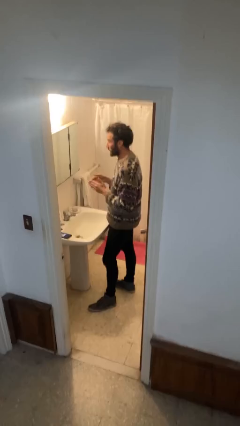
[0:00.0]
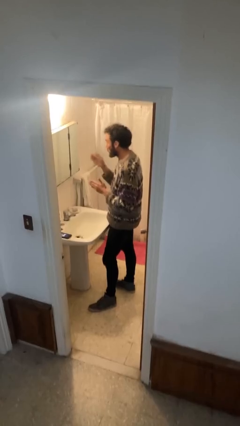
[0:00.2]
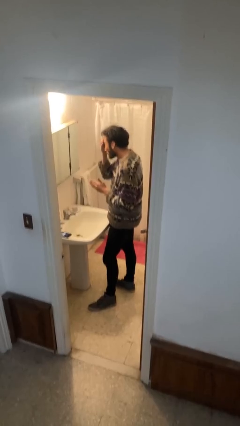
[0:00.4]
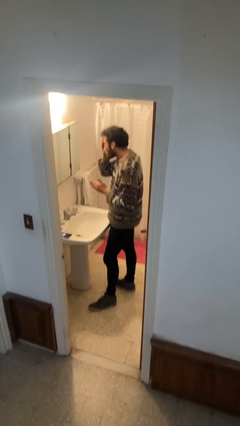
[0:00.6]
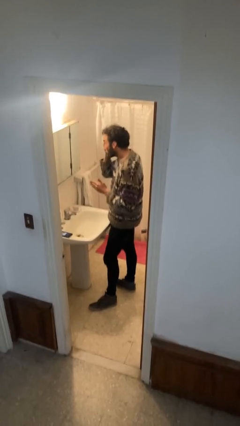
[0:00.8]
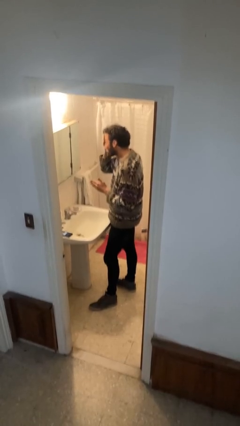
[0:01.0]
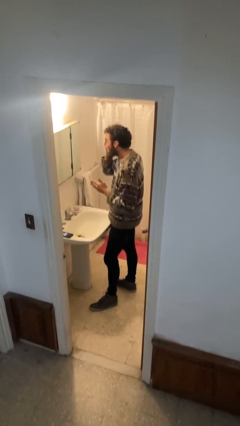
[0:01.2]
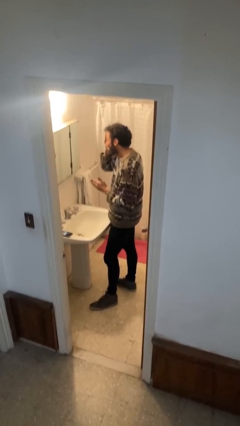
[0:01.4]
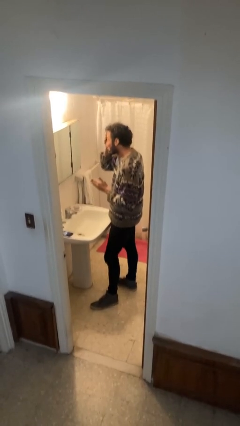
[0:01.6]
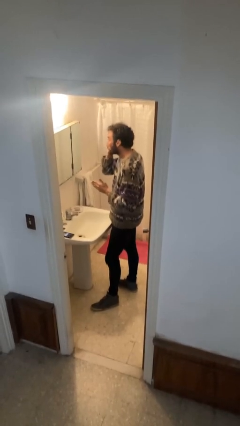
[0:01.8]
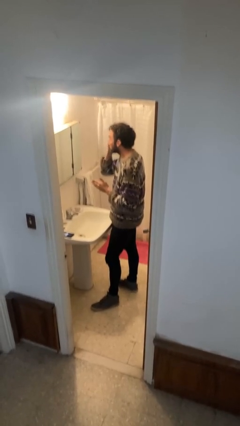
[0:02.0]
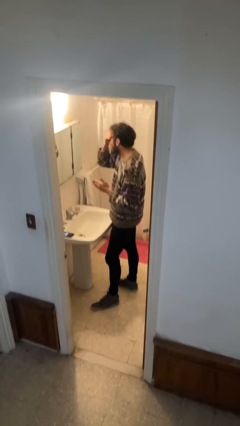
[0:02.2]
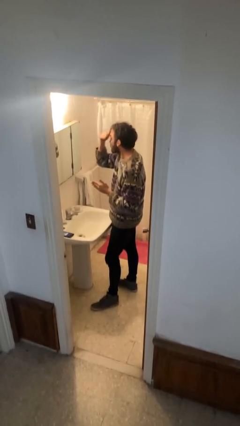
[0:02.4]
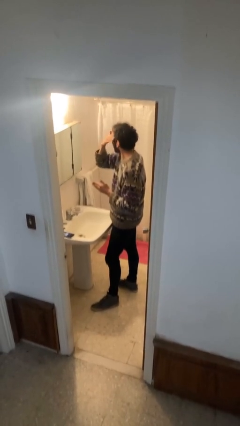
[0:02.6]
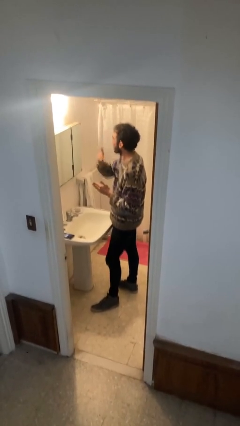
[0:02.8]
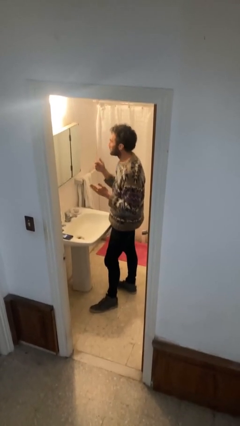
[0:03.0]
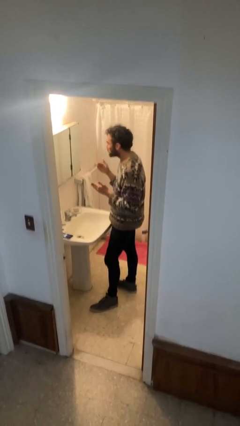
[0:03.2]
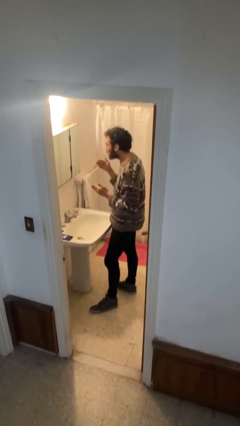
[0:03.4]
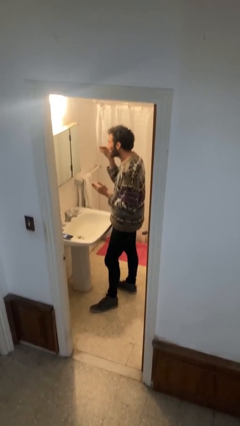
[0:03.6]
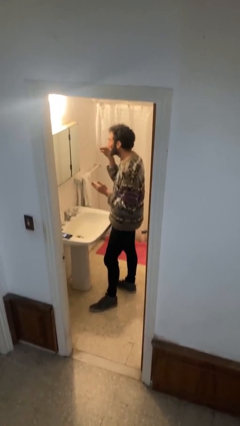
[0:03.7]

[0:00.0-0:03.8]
person applies foundation makeup

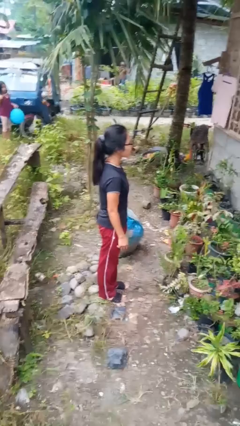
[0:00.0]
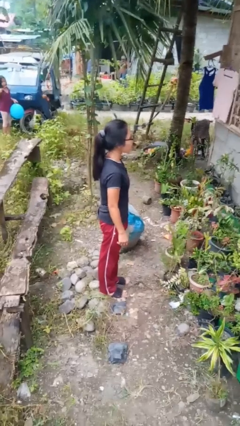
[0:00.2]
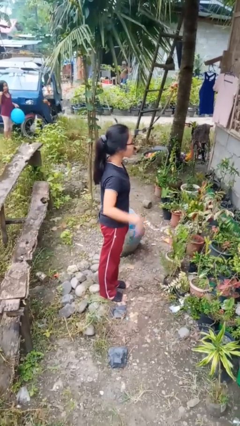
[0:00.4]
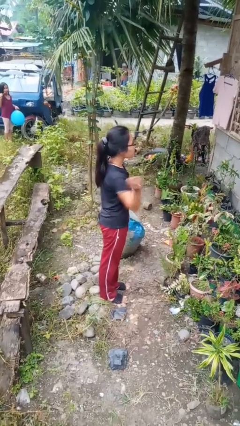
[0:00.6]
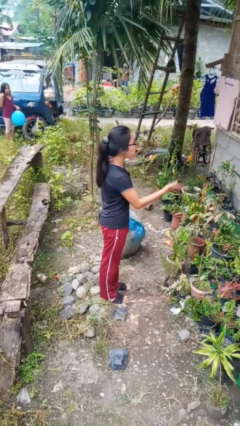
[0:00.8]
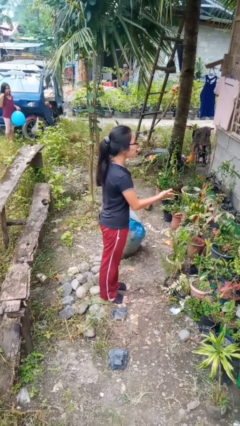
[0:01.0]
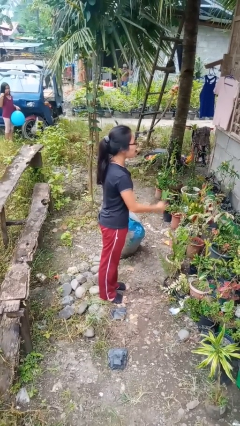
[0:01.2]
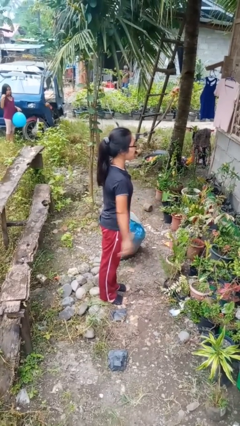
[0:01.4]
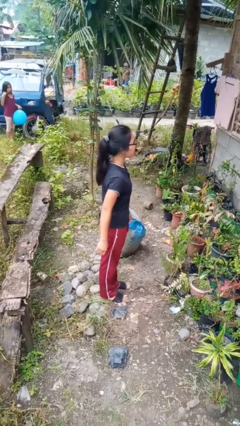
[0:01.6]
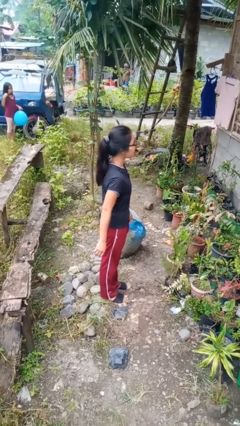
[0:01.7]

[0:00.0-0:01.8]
person karate chop

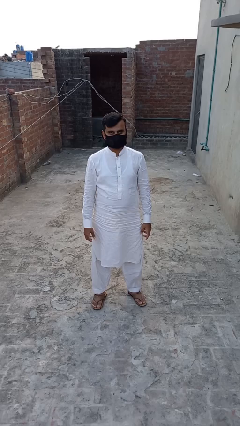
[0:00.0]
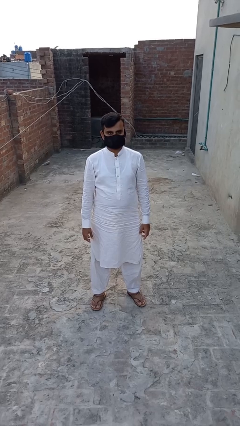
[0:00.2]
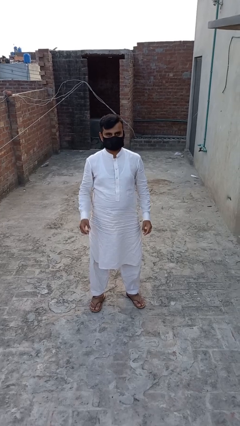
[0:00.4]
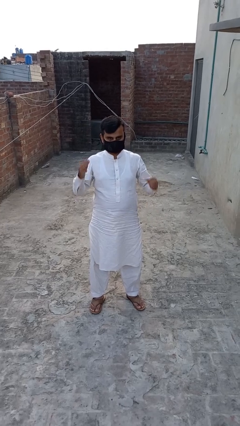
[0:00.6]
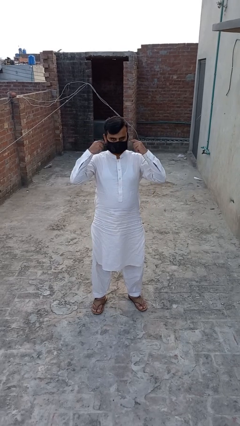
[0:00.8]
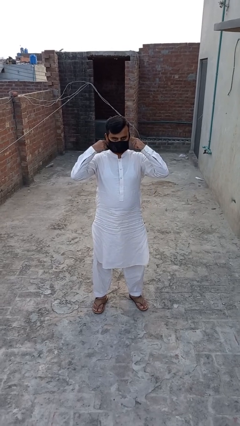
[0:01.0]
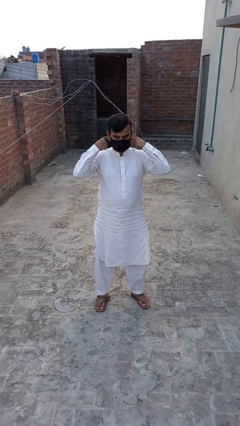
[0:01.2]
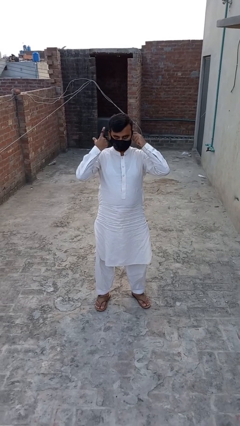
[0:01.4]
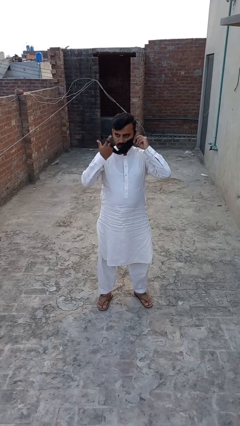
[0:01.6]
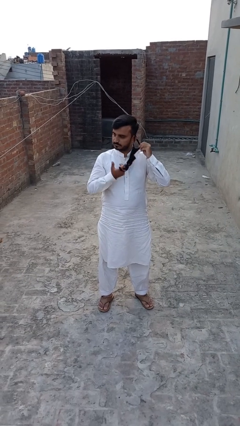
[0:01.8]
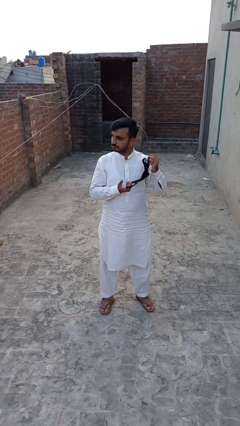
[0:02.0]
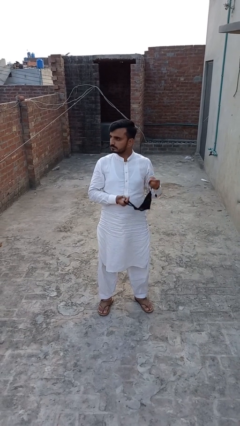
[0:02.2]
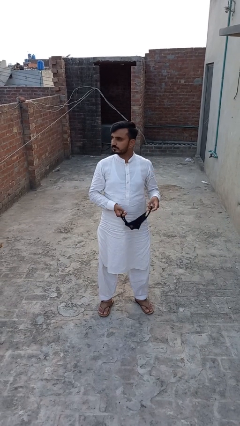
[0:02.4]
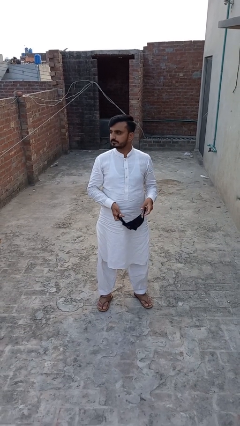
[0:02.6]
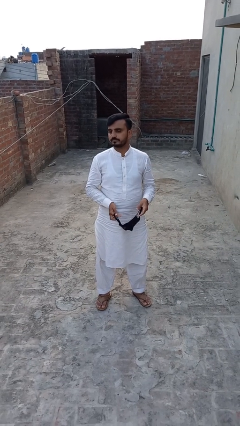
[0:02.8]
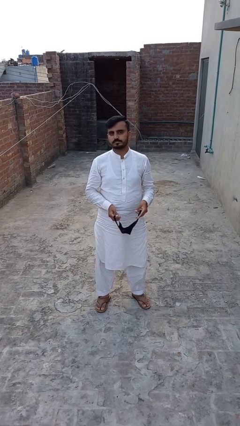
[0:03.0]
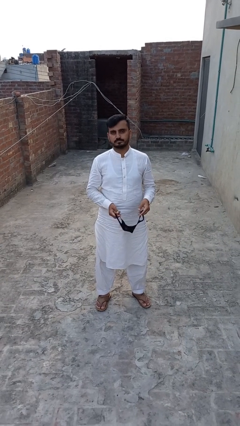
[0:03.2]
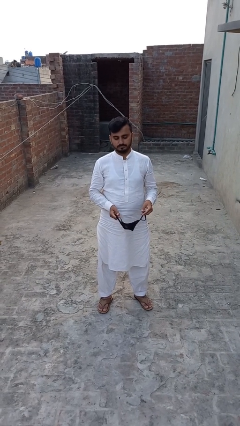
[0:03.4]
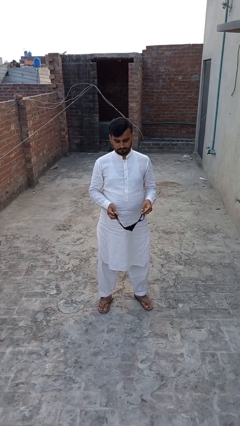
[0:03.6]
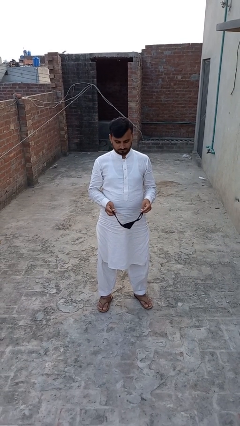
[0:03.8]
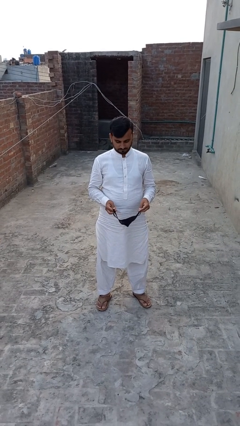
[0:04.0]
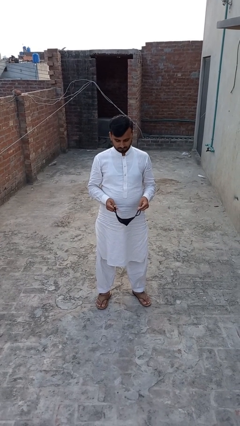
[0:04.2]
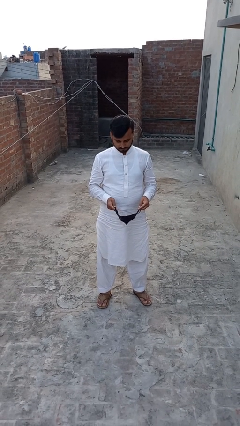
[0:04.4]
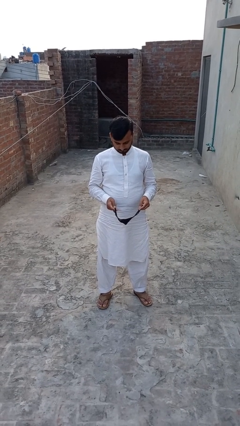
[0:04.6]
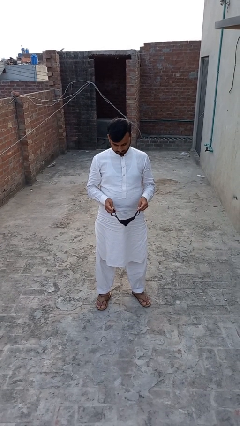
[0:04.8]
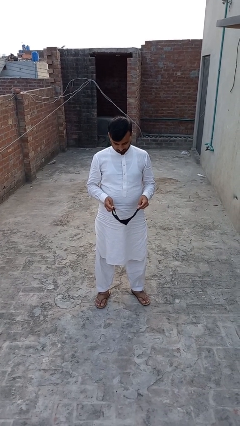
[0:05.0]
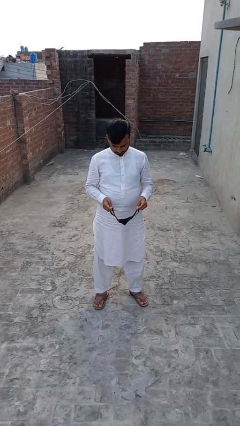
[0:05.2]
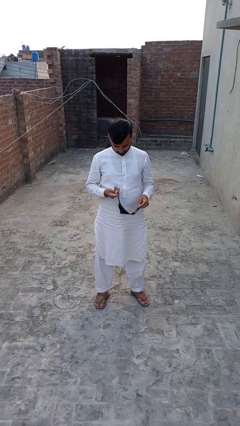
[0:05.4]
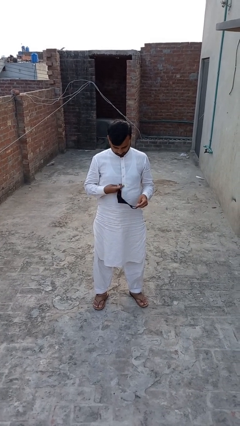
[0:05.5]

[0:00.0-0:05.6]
person takes off facemask

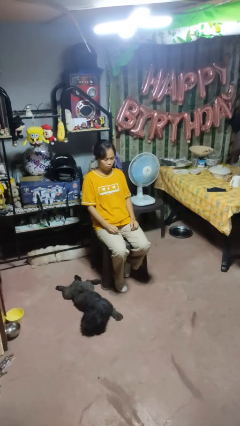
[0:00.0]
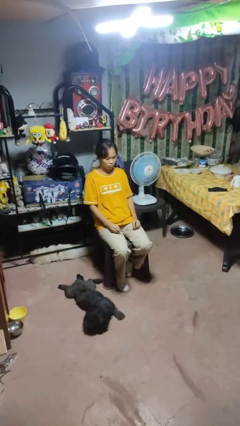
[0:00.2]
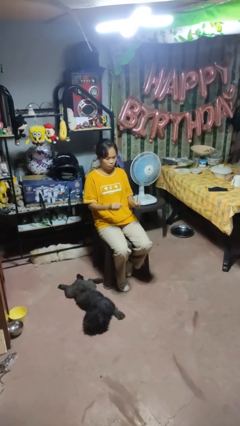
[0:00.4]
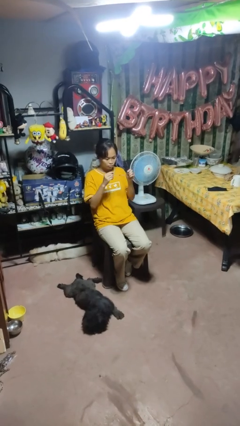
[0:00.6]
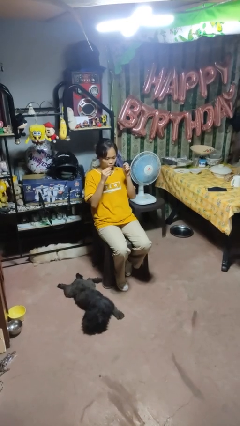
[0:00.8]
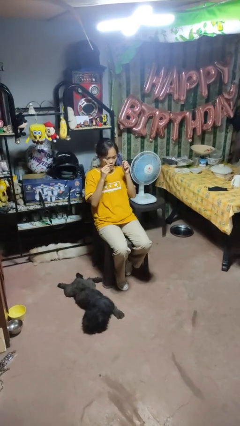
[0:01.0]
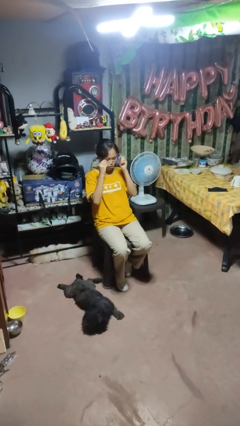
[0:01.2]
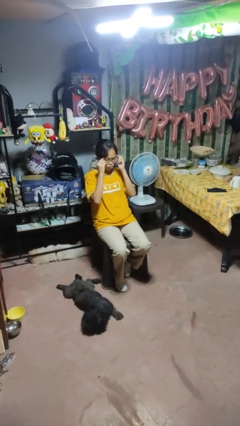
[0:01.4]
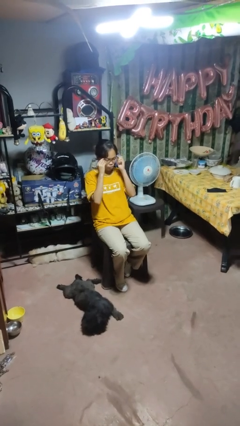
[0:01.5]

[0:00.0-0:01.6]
person puts on glasses

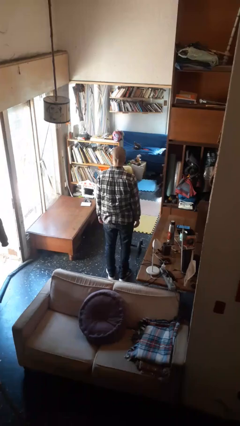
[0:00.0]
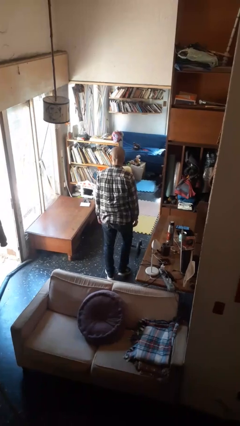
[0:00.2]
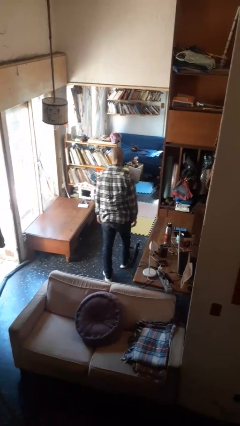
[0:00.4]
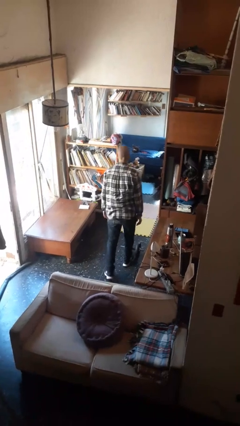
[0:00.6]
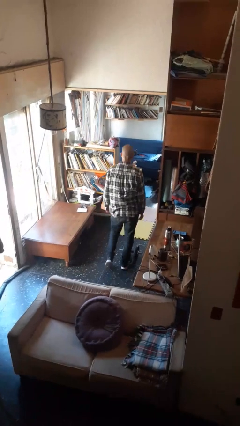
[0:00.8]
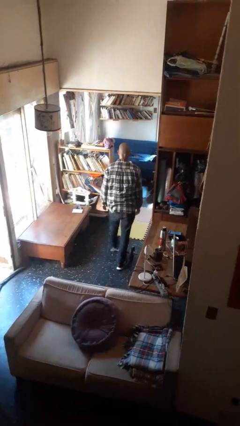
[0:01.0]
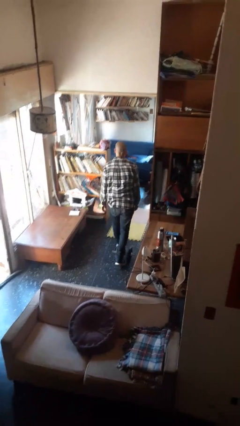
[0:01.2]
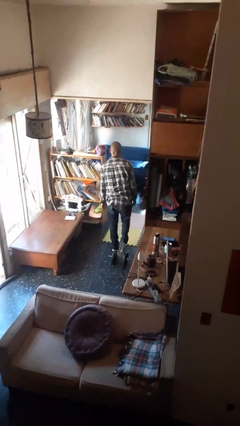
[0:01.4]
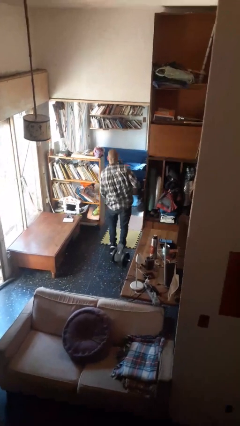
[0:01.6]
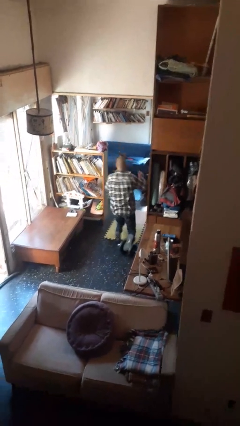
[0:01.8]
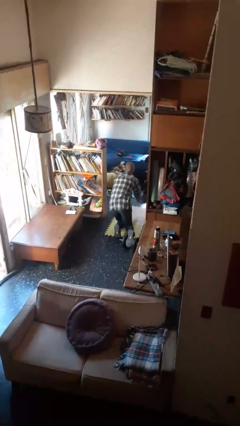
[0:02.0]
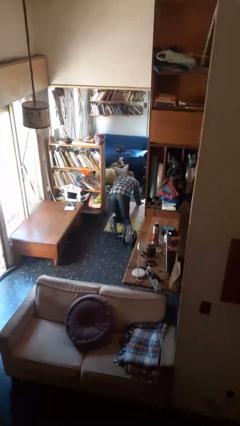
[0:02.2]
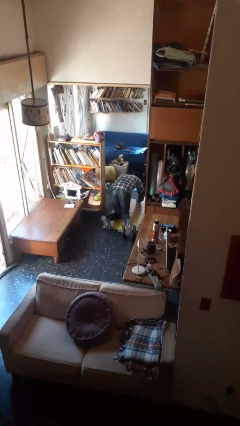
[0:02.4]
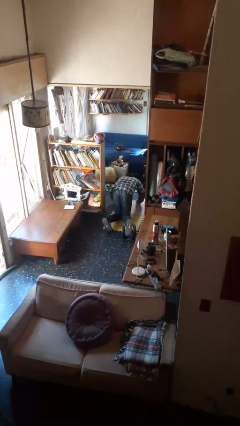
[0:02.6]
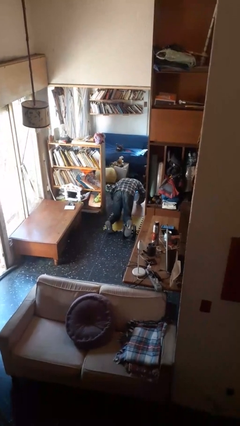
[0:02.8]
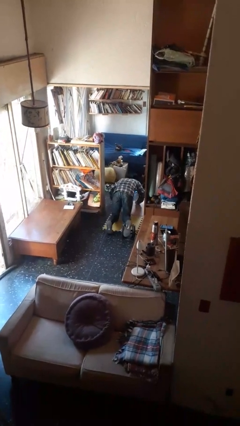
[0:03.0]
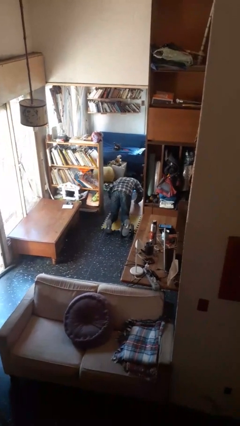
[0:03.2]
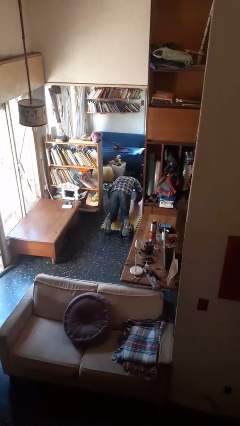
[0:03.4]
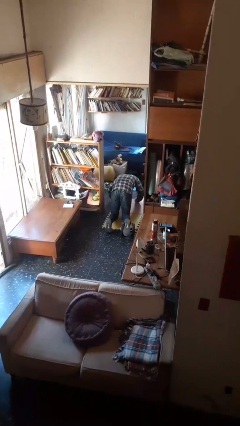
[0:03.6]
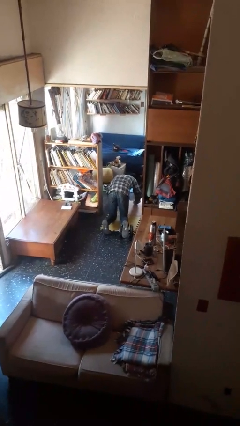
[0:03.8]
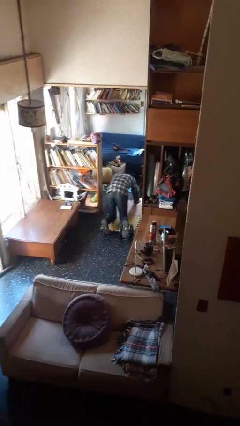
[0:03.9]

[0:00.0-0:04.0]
person trips on object on floor

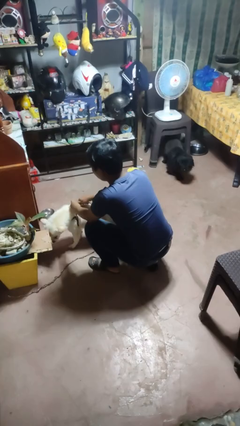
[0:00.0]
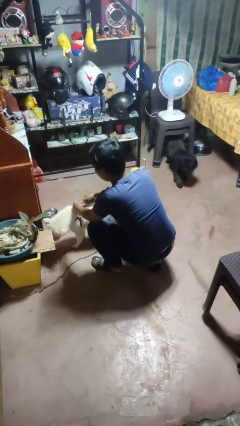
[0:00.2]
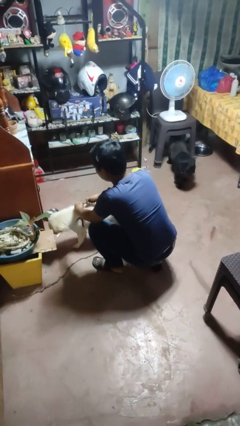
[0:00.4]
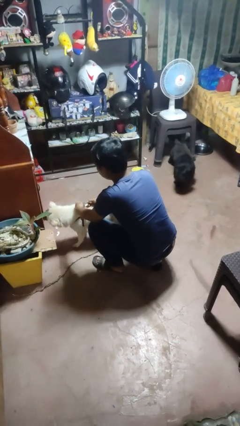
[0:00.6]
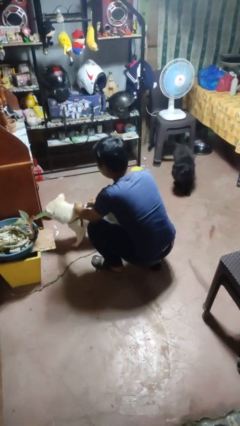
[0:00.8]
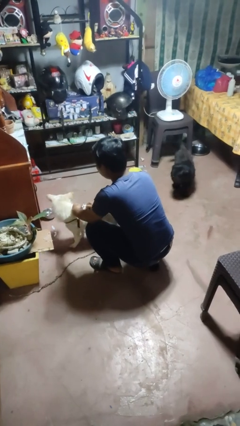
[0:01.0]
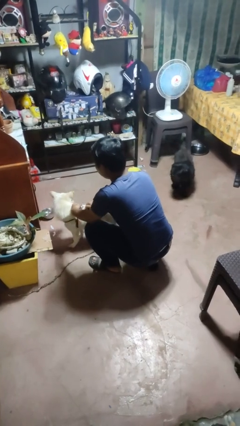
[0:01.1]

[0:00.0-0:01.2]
person attaches leash to dog
